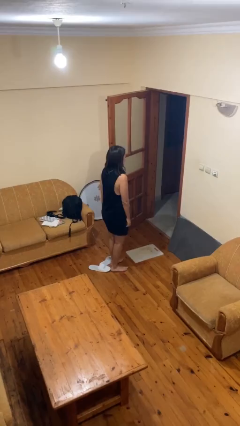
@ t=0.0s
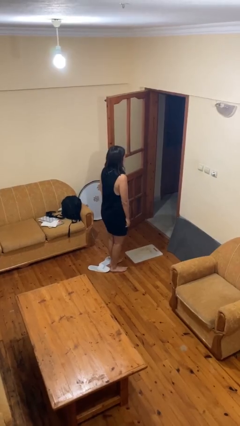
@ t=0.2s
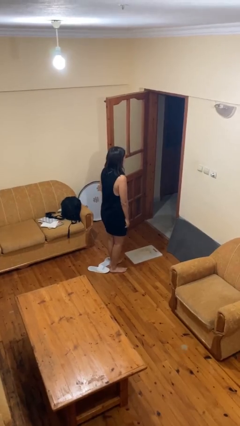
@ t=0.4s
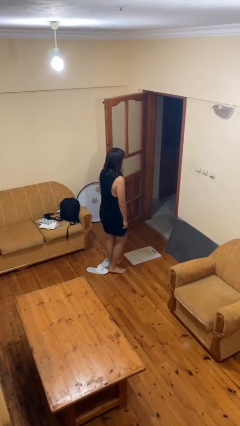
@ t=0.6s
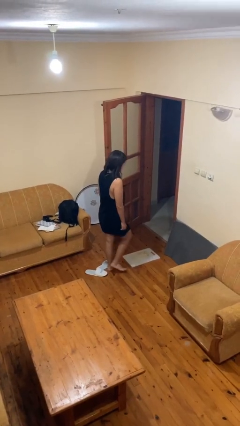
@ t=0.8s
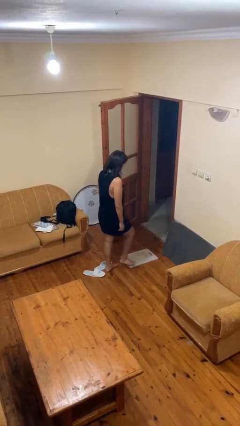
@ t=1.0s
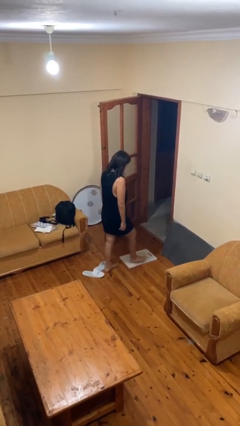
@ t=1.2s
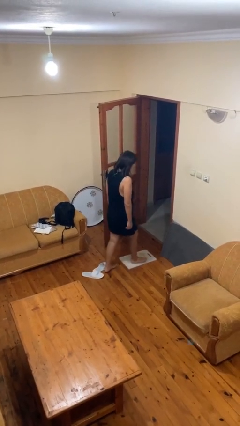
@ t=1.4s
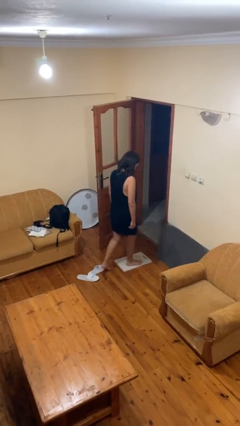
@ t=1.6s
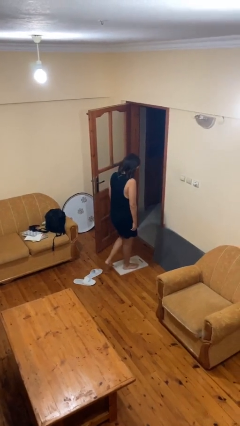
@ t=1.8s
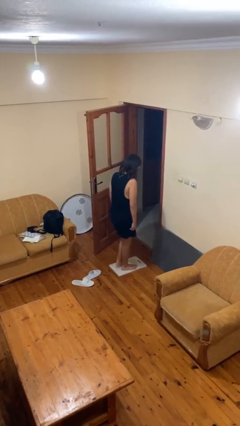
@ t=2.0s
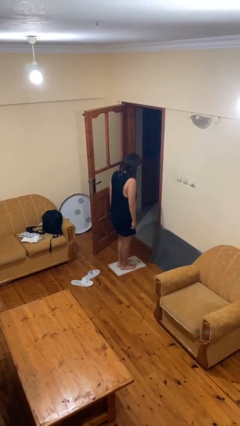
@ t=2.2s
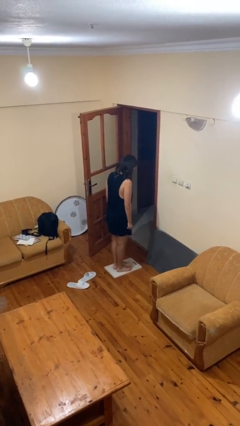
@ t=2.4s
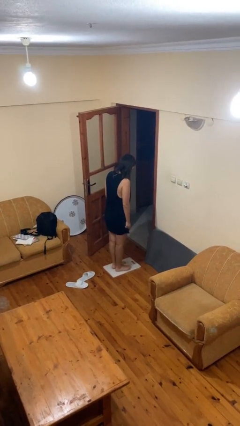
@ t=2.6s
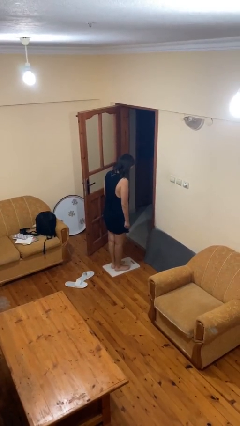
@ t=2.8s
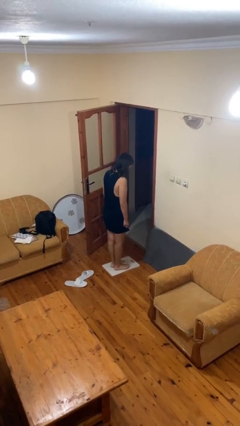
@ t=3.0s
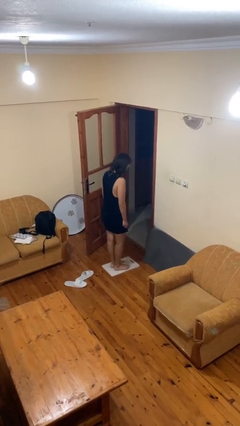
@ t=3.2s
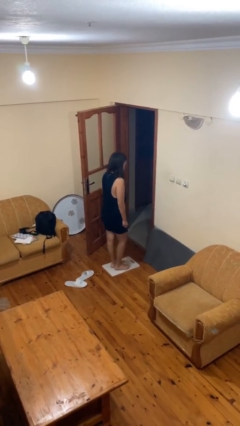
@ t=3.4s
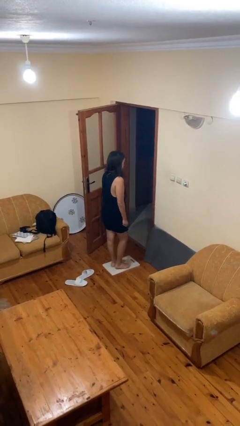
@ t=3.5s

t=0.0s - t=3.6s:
person uses bodyweight scale

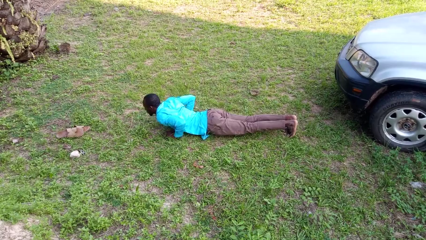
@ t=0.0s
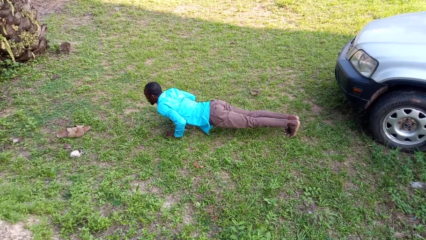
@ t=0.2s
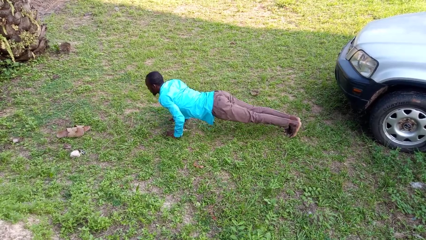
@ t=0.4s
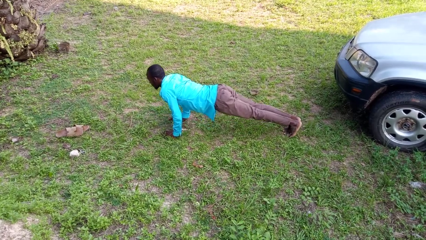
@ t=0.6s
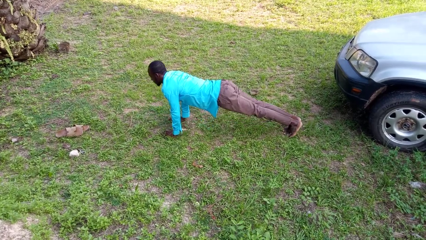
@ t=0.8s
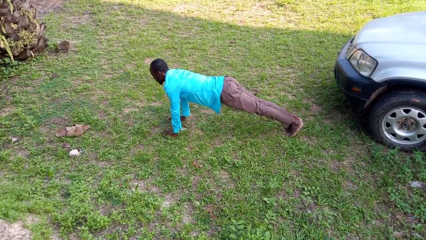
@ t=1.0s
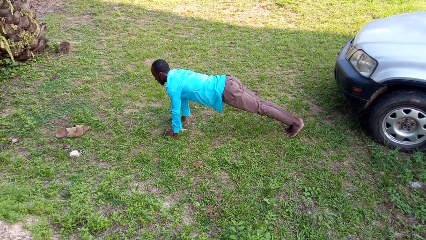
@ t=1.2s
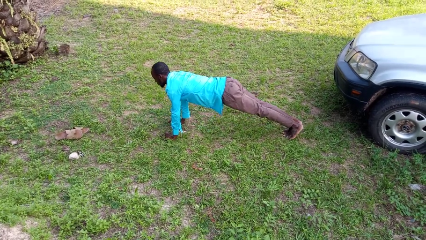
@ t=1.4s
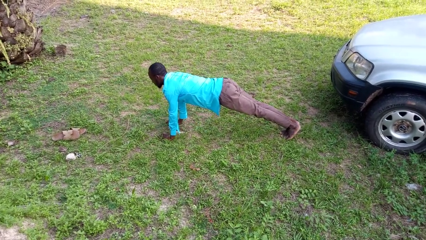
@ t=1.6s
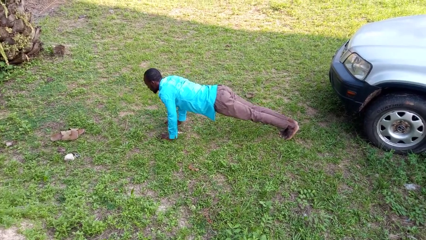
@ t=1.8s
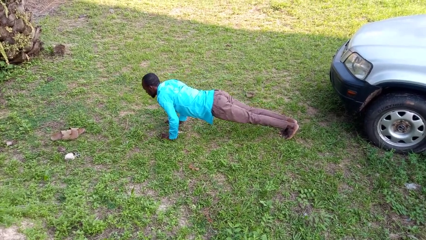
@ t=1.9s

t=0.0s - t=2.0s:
person exercises with pushup

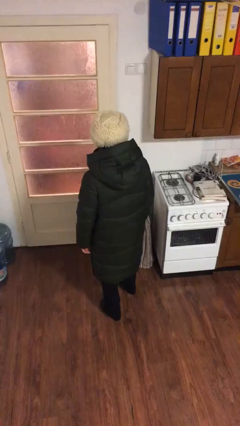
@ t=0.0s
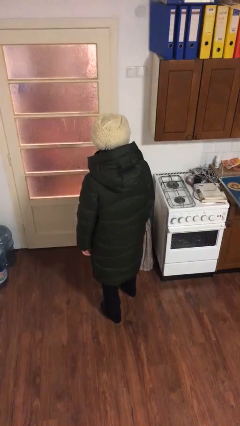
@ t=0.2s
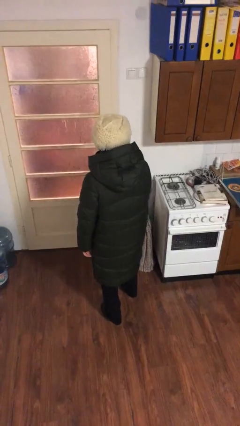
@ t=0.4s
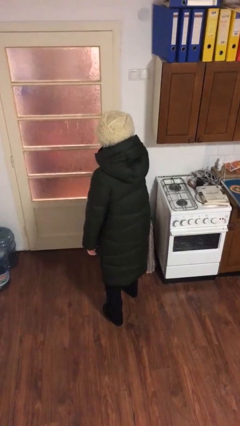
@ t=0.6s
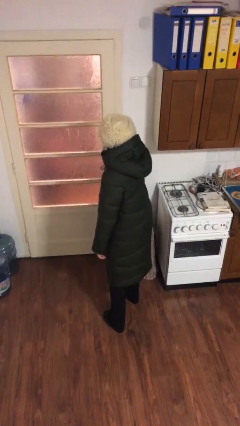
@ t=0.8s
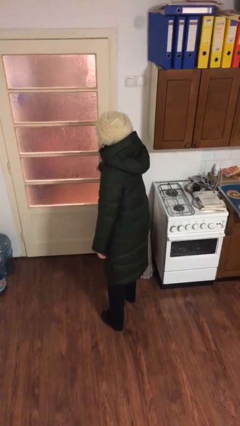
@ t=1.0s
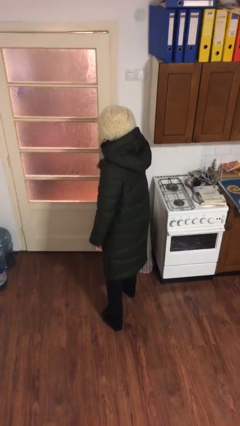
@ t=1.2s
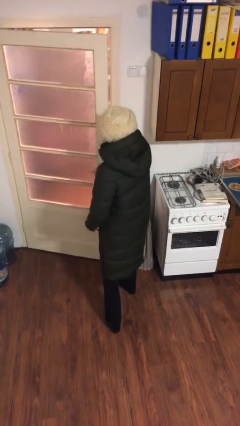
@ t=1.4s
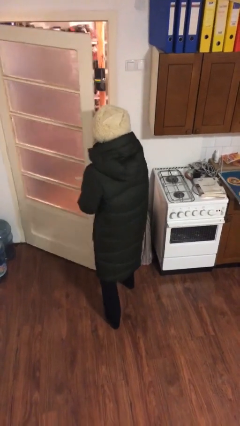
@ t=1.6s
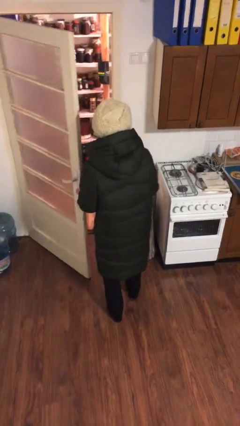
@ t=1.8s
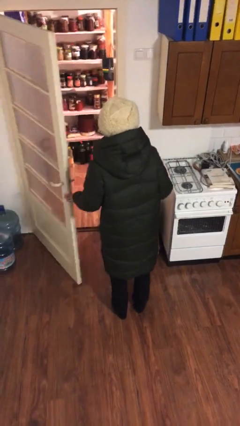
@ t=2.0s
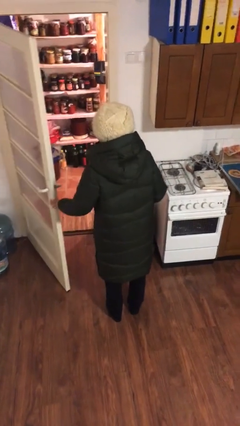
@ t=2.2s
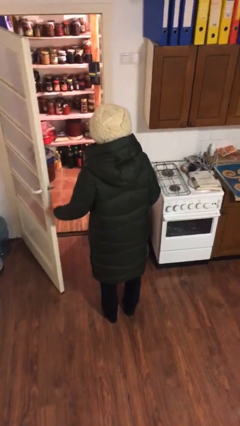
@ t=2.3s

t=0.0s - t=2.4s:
person opens facility door

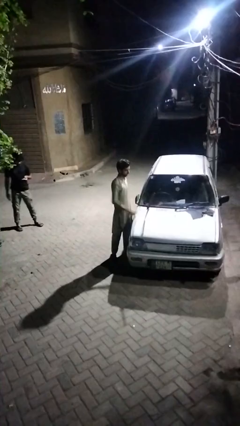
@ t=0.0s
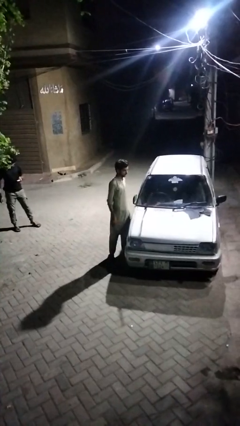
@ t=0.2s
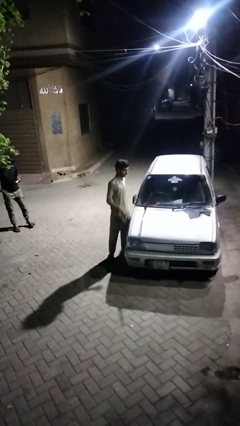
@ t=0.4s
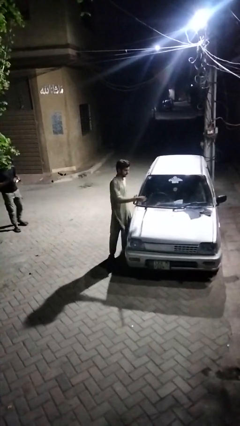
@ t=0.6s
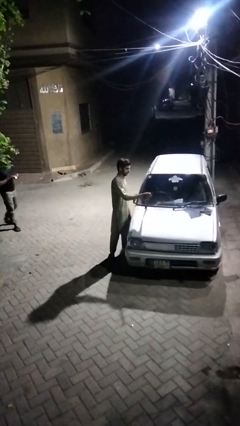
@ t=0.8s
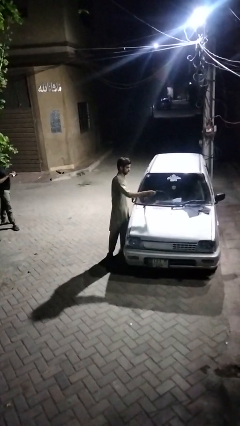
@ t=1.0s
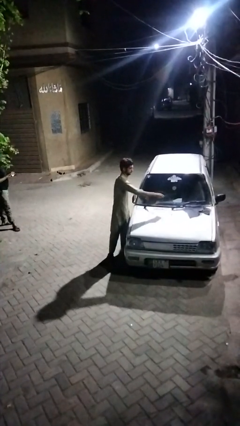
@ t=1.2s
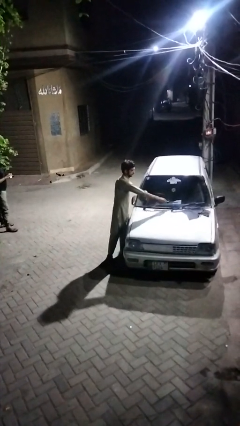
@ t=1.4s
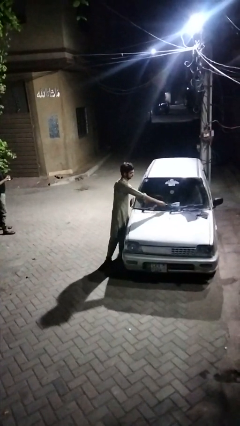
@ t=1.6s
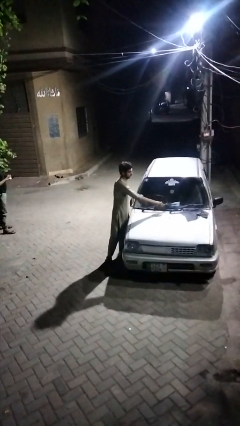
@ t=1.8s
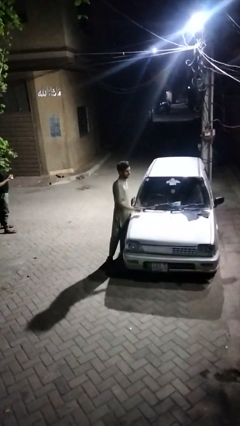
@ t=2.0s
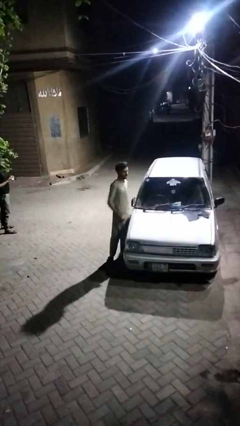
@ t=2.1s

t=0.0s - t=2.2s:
person flips down car wipers

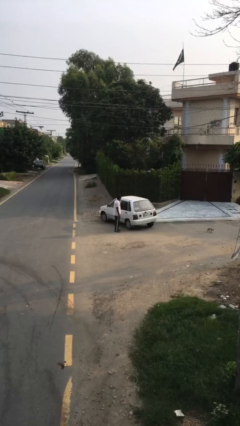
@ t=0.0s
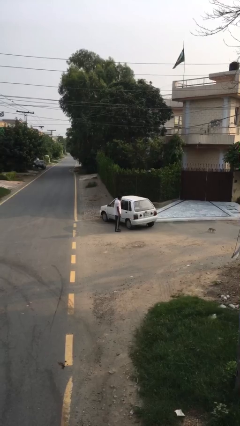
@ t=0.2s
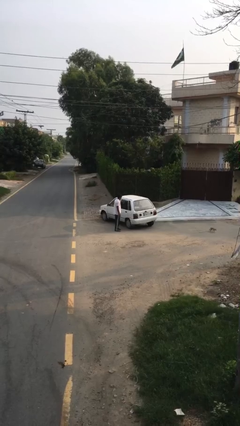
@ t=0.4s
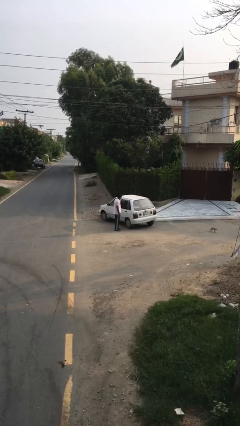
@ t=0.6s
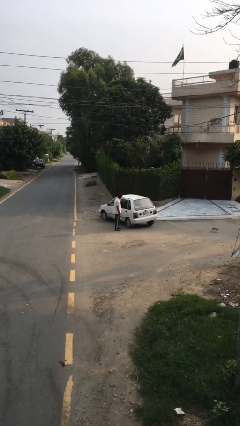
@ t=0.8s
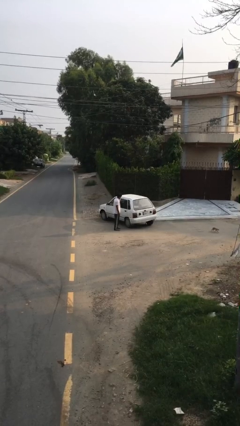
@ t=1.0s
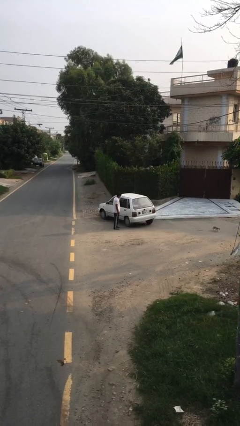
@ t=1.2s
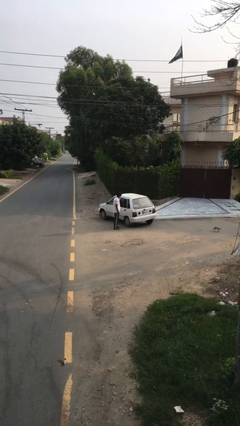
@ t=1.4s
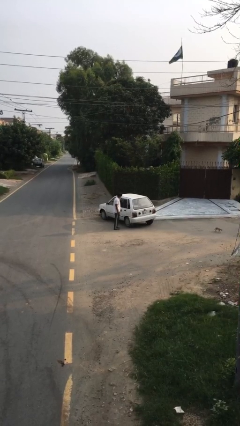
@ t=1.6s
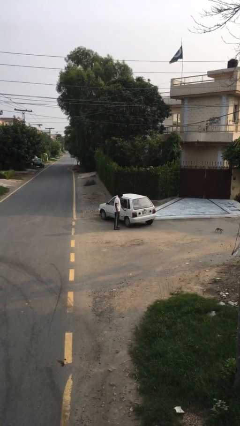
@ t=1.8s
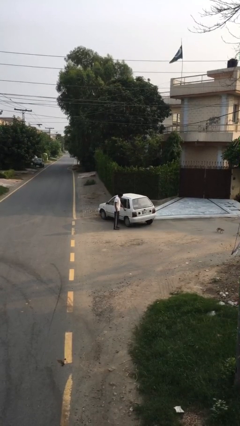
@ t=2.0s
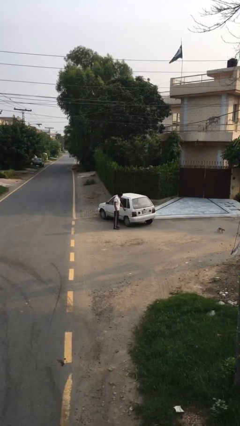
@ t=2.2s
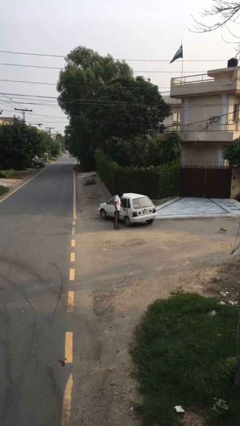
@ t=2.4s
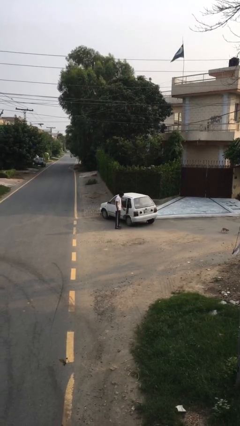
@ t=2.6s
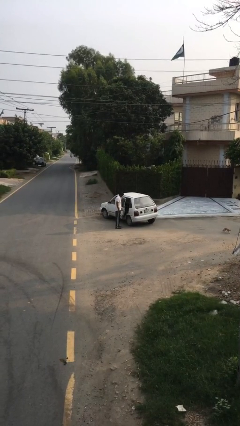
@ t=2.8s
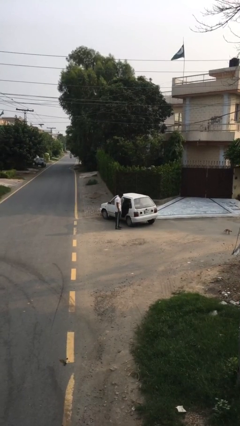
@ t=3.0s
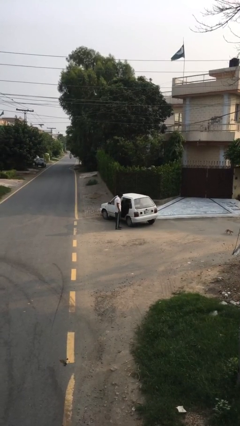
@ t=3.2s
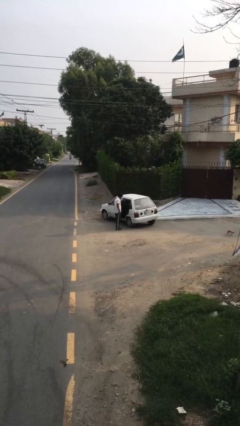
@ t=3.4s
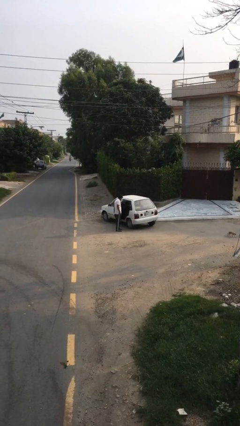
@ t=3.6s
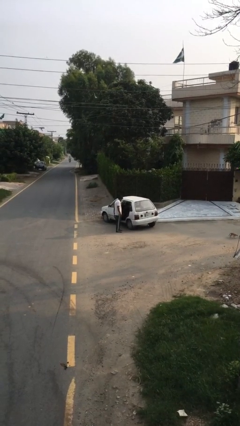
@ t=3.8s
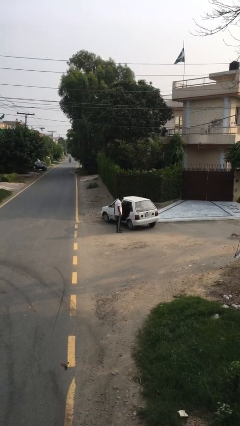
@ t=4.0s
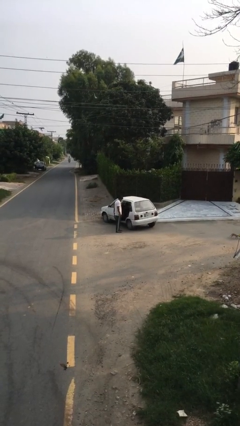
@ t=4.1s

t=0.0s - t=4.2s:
person opens car door

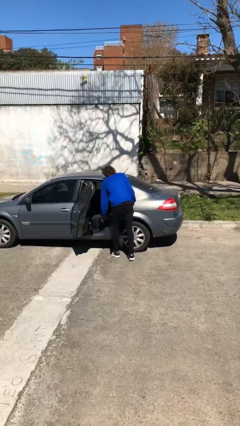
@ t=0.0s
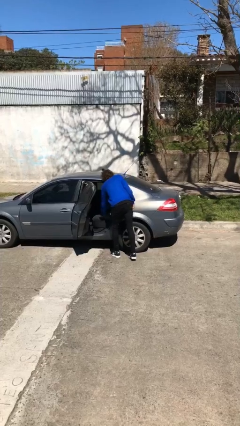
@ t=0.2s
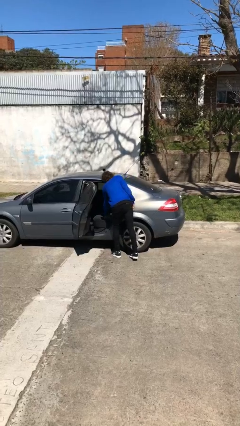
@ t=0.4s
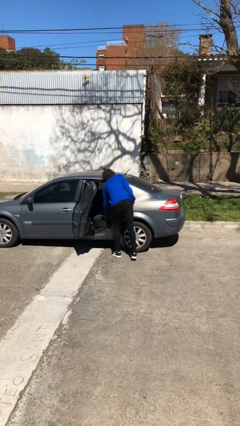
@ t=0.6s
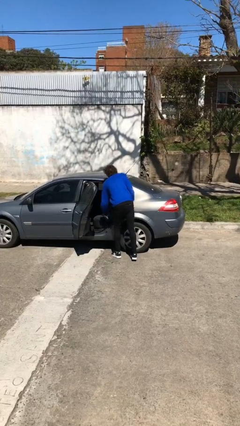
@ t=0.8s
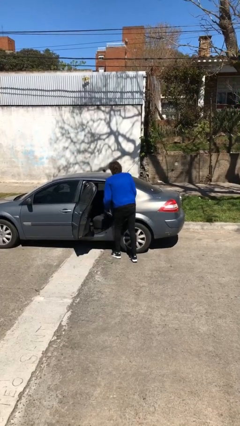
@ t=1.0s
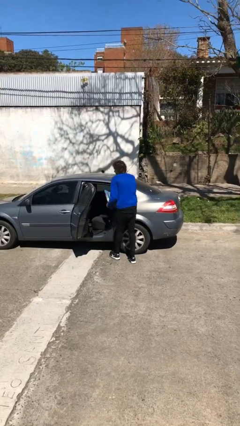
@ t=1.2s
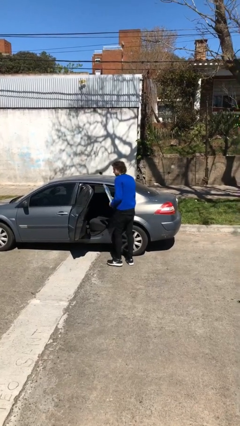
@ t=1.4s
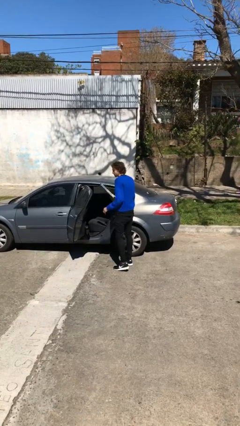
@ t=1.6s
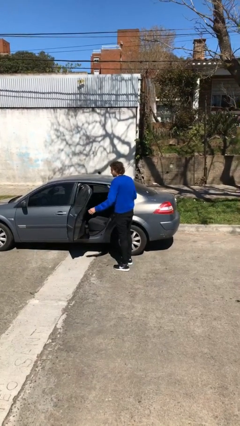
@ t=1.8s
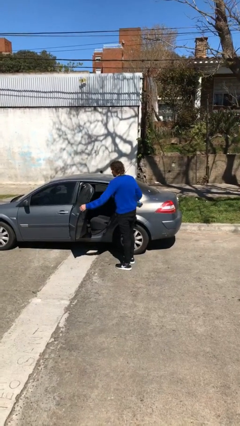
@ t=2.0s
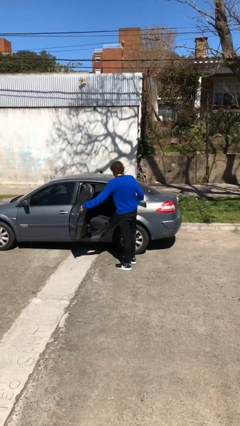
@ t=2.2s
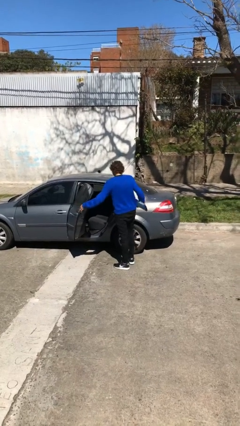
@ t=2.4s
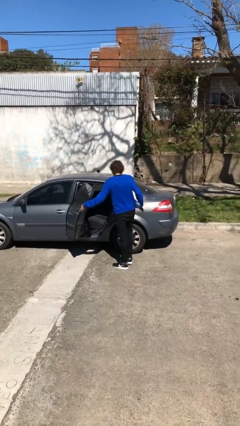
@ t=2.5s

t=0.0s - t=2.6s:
person unloads car
